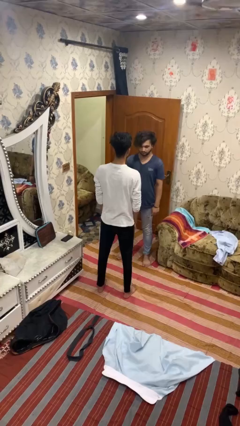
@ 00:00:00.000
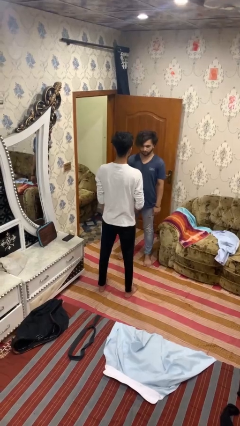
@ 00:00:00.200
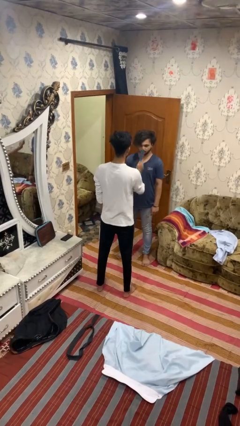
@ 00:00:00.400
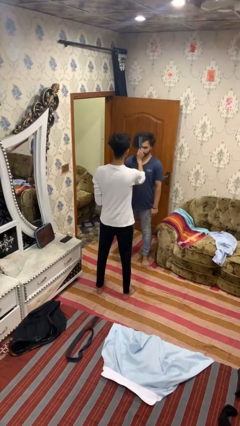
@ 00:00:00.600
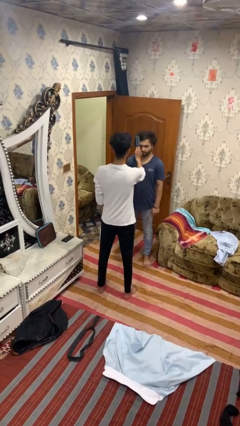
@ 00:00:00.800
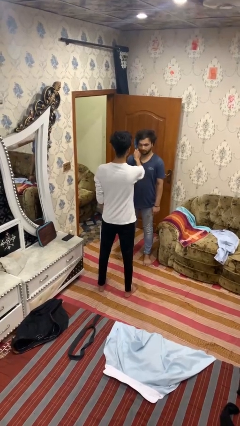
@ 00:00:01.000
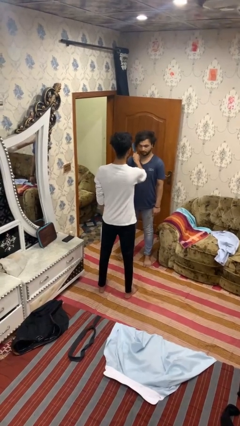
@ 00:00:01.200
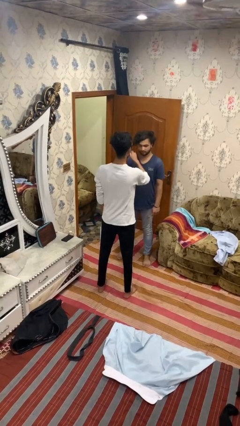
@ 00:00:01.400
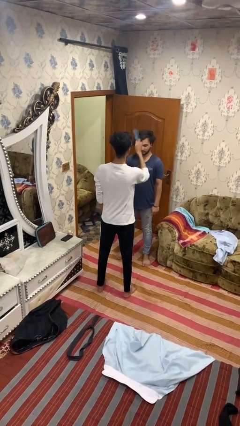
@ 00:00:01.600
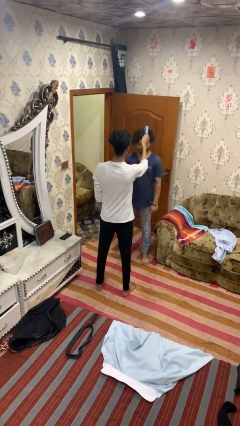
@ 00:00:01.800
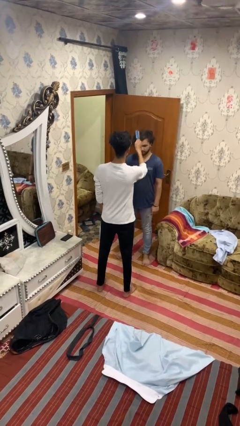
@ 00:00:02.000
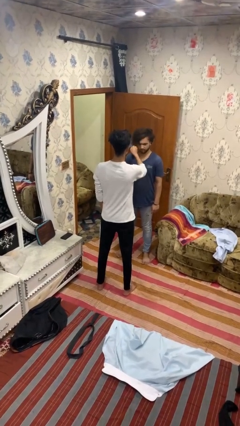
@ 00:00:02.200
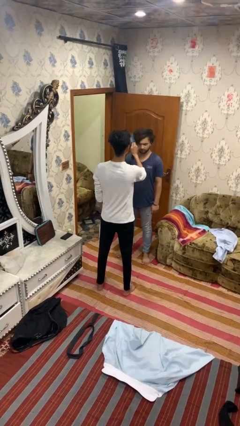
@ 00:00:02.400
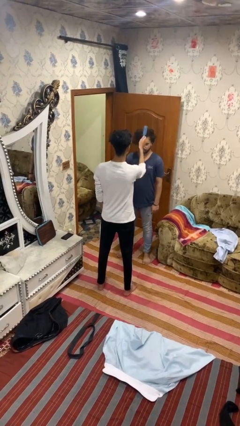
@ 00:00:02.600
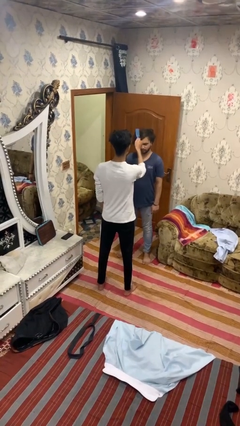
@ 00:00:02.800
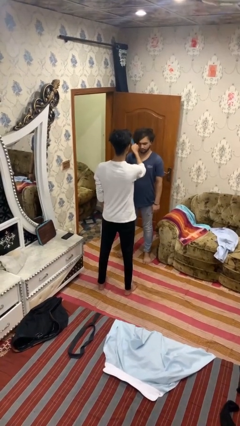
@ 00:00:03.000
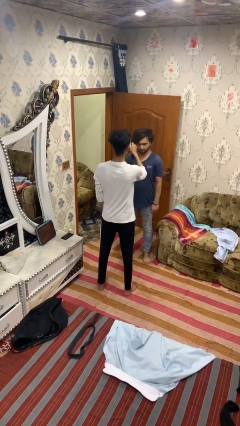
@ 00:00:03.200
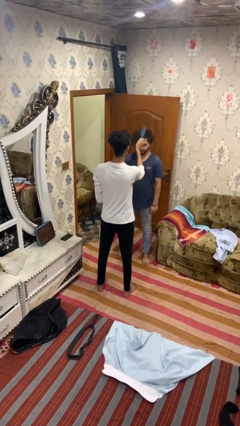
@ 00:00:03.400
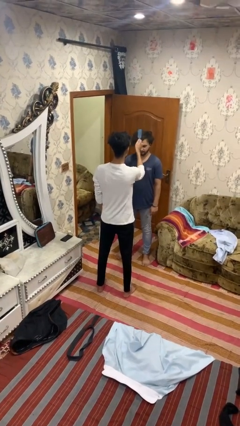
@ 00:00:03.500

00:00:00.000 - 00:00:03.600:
person brushes hair of person

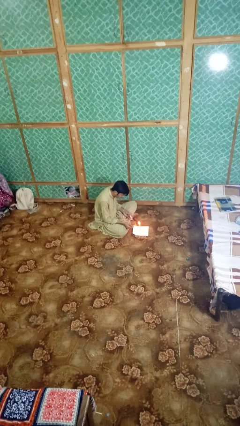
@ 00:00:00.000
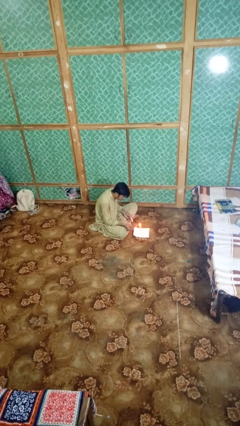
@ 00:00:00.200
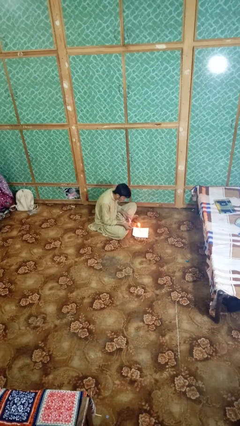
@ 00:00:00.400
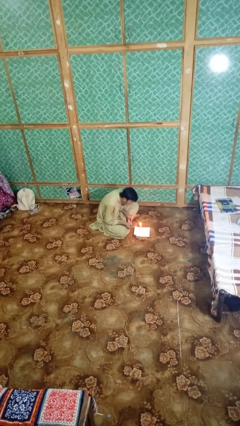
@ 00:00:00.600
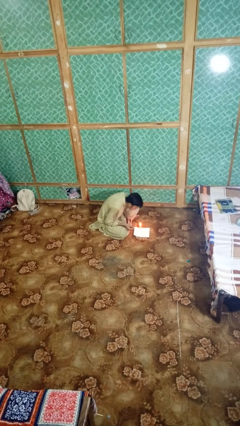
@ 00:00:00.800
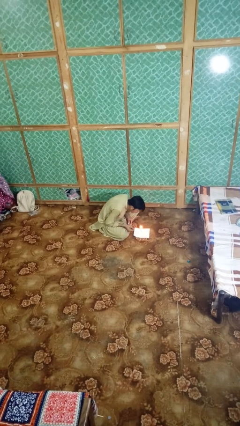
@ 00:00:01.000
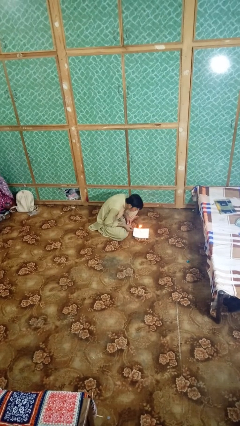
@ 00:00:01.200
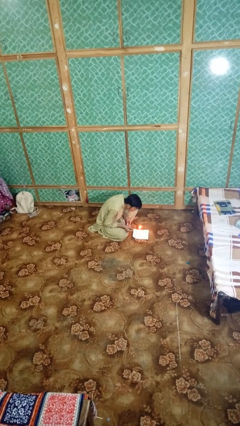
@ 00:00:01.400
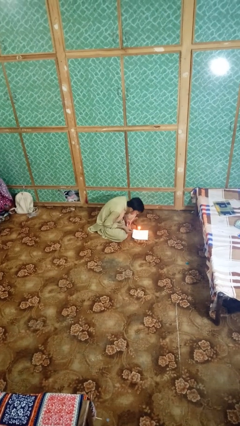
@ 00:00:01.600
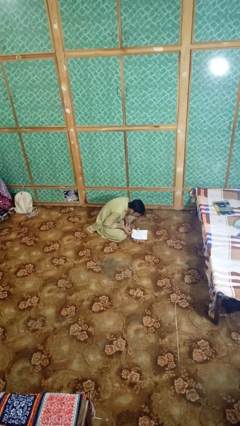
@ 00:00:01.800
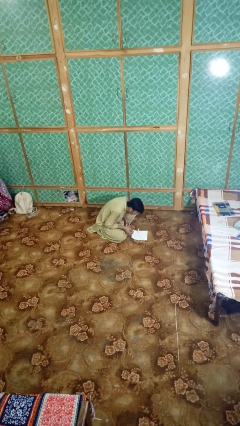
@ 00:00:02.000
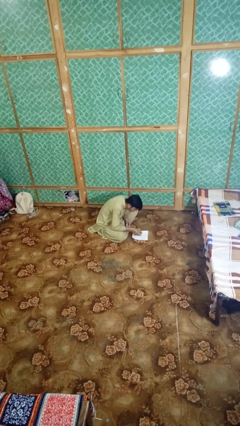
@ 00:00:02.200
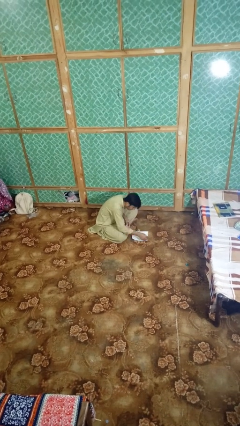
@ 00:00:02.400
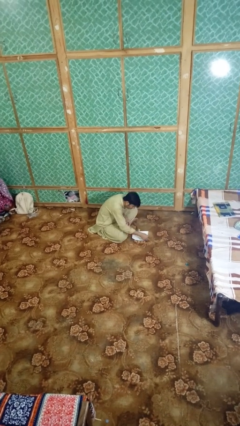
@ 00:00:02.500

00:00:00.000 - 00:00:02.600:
person extinguishes candle

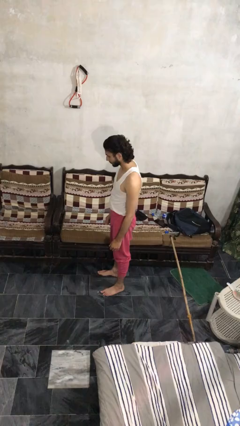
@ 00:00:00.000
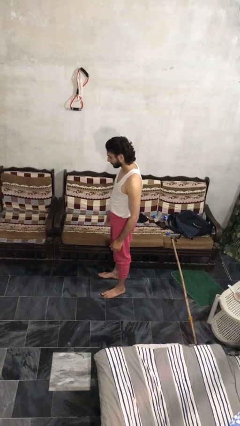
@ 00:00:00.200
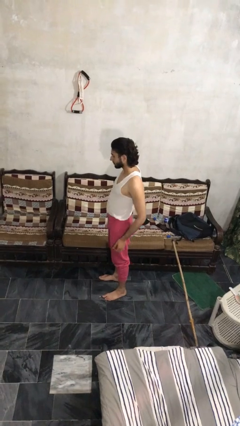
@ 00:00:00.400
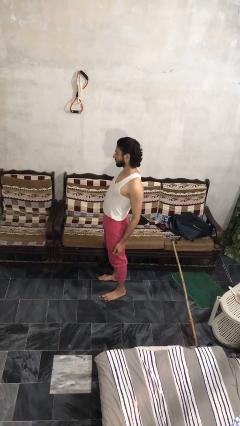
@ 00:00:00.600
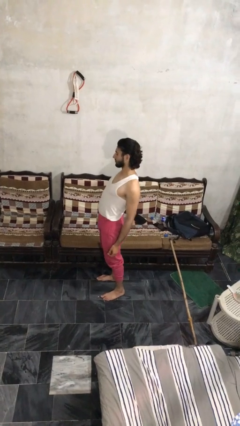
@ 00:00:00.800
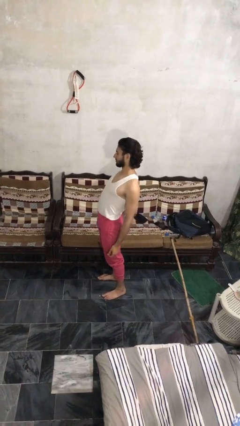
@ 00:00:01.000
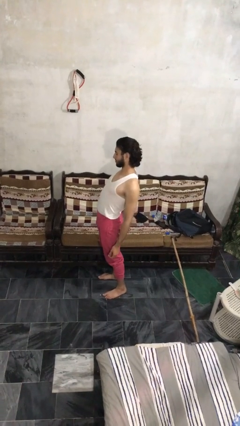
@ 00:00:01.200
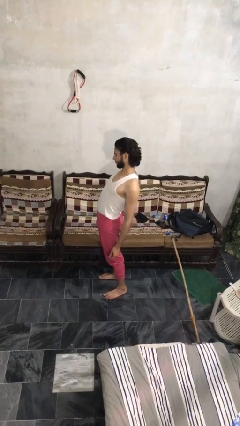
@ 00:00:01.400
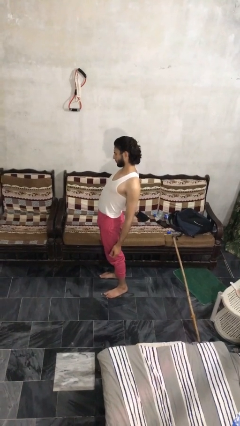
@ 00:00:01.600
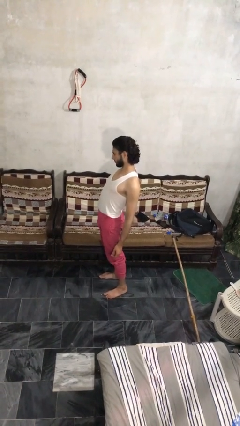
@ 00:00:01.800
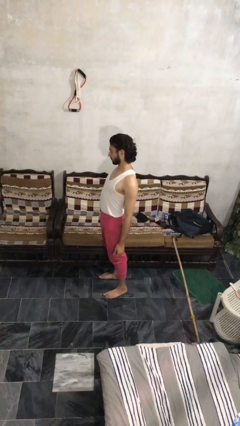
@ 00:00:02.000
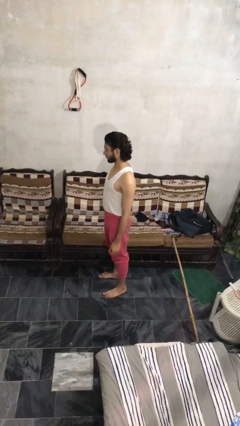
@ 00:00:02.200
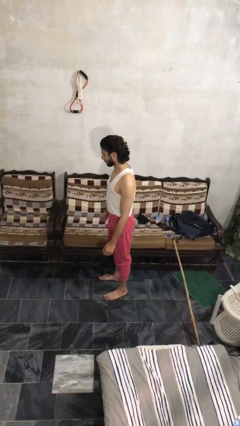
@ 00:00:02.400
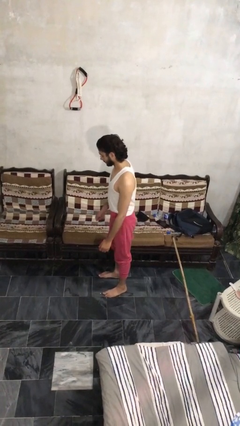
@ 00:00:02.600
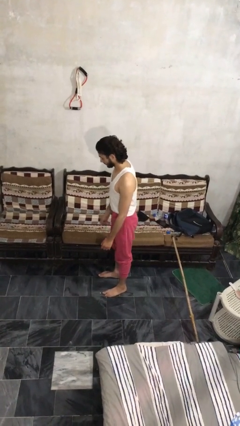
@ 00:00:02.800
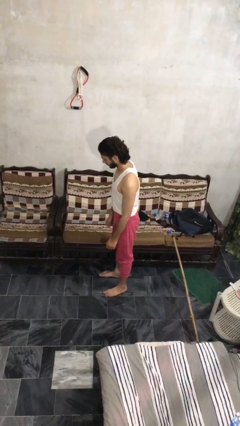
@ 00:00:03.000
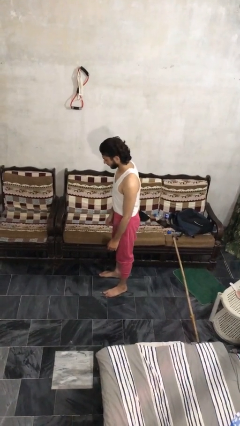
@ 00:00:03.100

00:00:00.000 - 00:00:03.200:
person stretches back

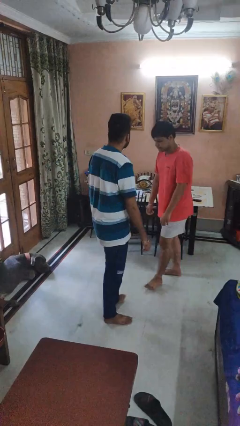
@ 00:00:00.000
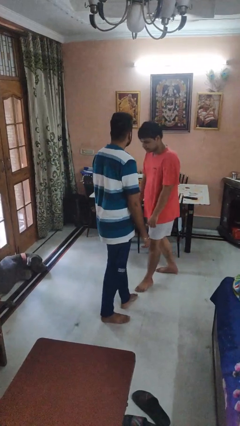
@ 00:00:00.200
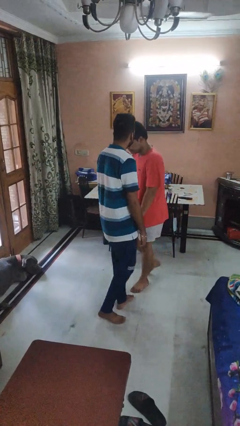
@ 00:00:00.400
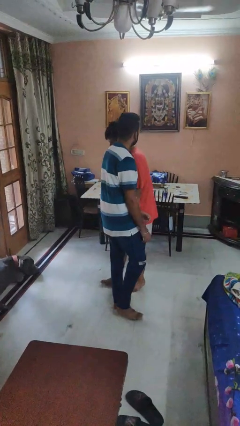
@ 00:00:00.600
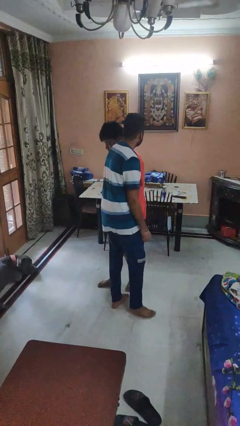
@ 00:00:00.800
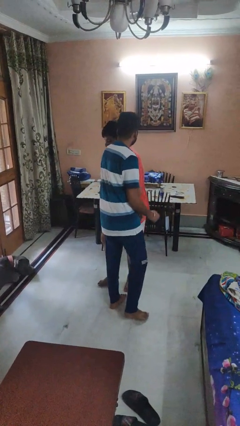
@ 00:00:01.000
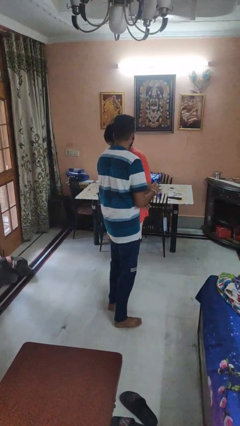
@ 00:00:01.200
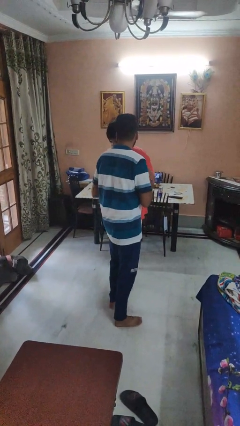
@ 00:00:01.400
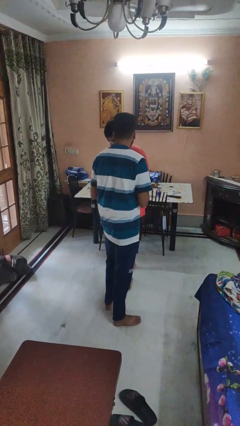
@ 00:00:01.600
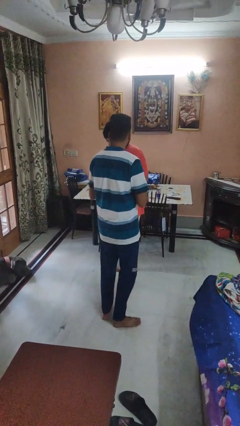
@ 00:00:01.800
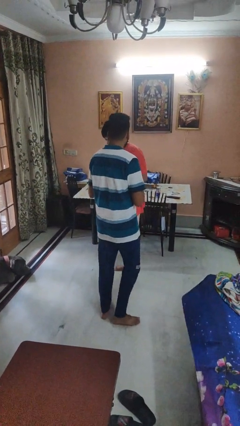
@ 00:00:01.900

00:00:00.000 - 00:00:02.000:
person bumps into person

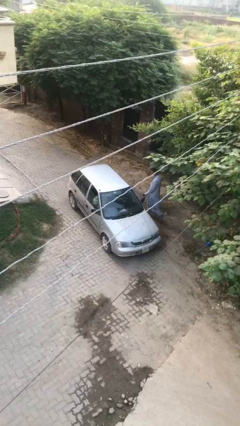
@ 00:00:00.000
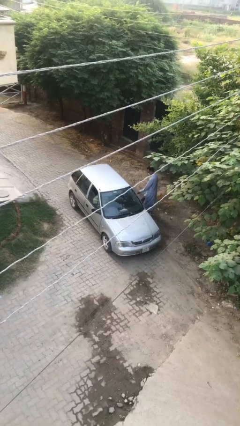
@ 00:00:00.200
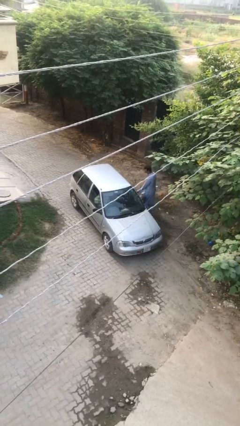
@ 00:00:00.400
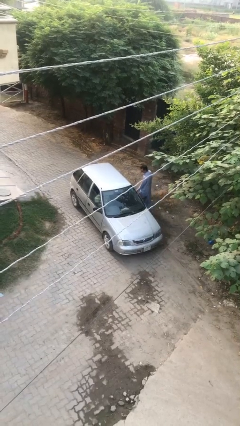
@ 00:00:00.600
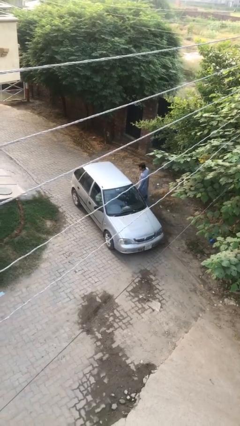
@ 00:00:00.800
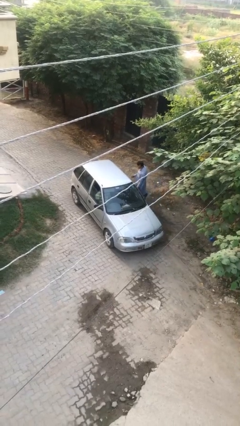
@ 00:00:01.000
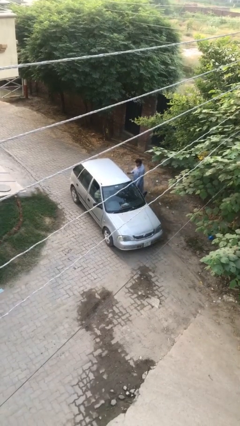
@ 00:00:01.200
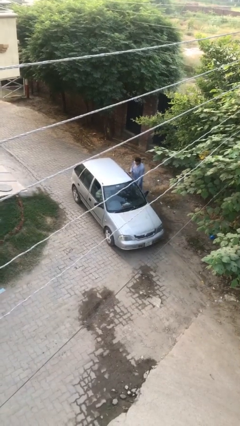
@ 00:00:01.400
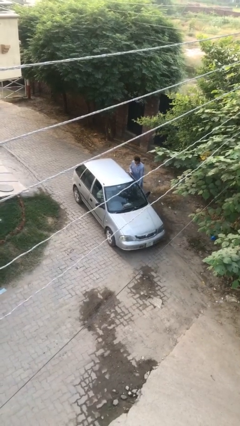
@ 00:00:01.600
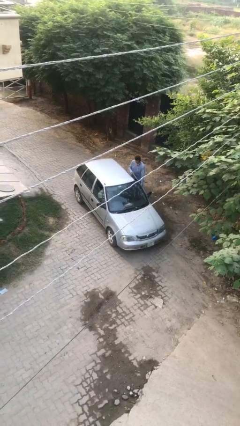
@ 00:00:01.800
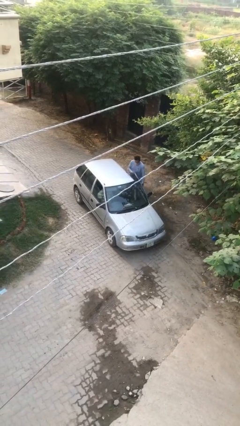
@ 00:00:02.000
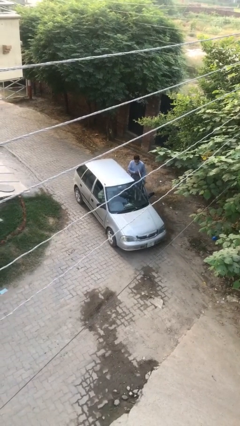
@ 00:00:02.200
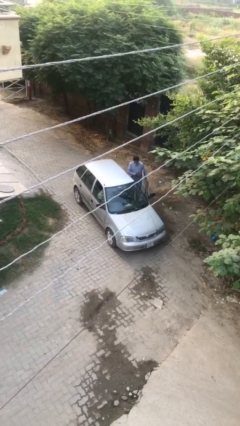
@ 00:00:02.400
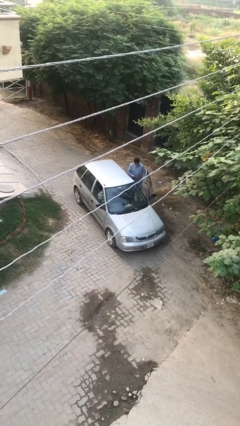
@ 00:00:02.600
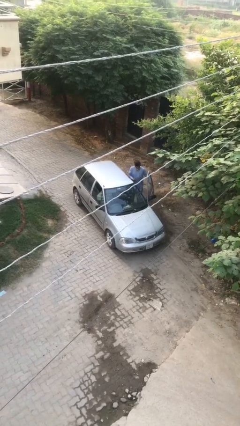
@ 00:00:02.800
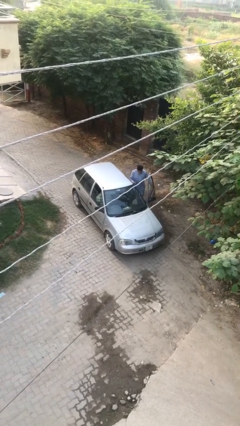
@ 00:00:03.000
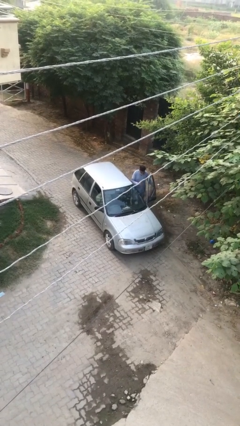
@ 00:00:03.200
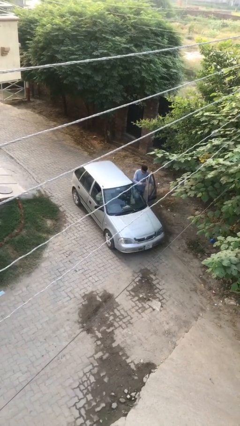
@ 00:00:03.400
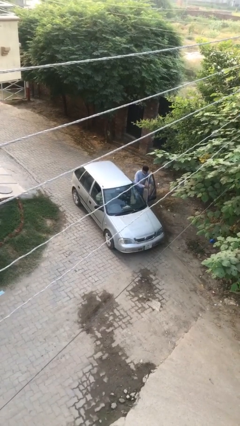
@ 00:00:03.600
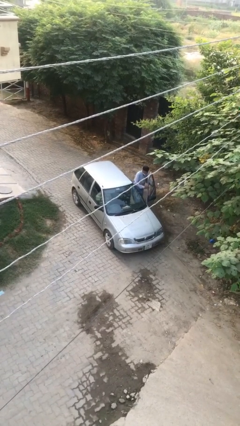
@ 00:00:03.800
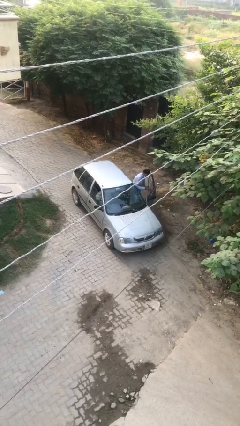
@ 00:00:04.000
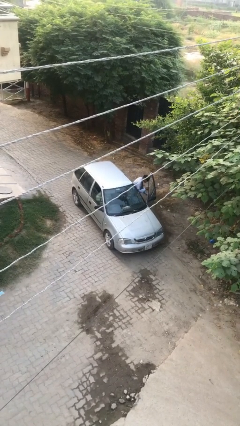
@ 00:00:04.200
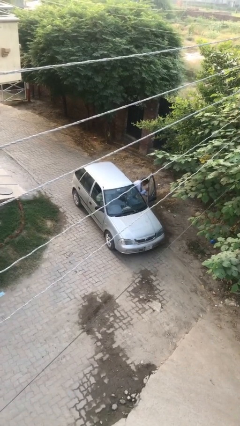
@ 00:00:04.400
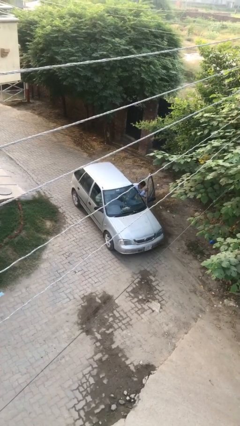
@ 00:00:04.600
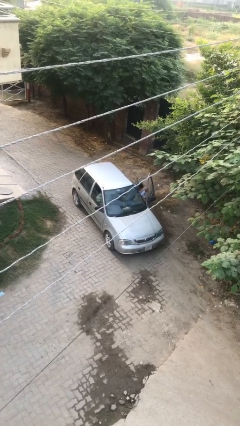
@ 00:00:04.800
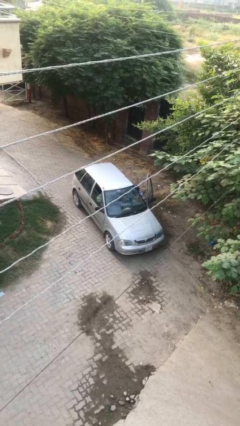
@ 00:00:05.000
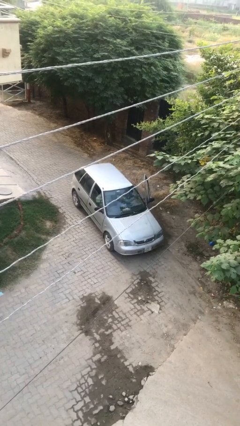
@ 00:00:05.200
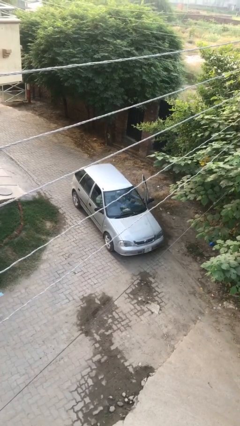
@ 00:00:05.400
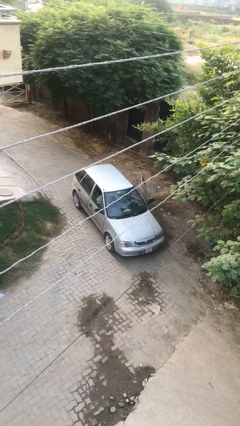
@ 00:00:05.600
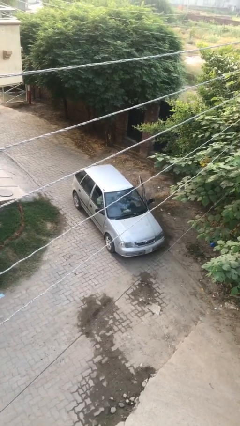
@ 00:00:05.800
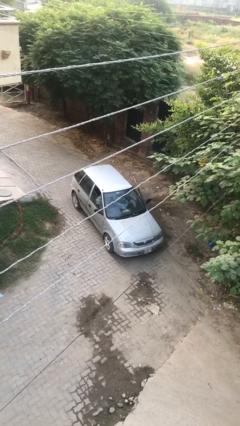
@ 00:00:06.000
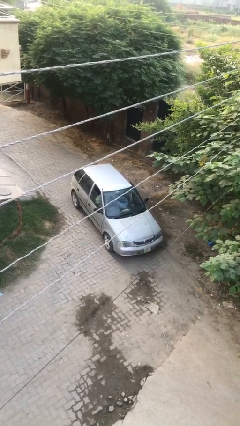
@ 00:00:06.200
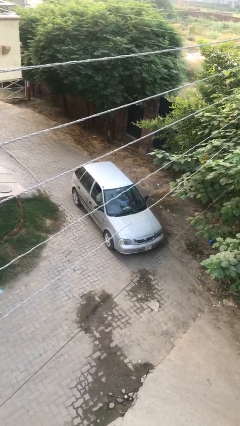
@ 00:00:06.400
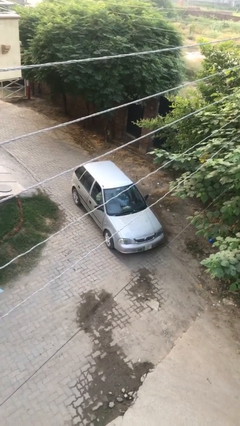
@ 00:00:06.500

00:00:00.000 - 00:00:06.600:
car picks up person
